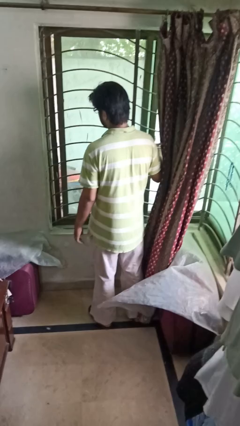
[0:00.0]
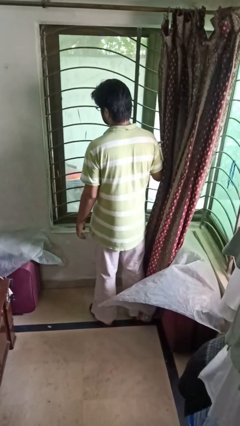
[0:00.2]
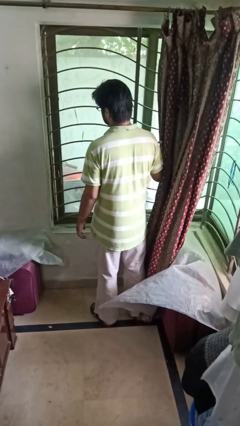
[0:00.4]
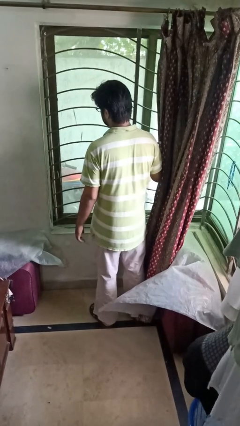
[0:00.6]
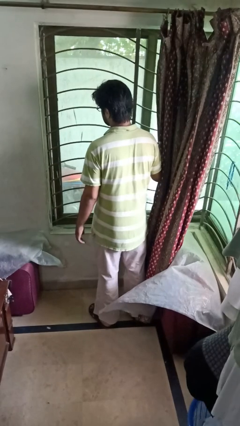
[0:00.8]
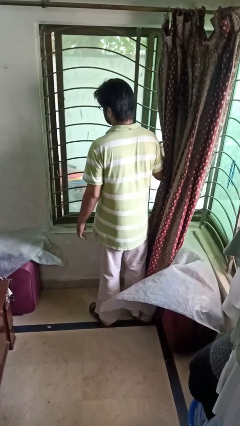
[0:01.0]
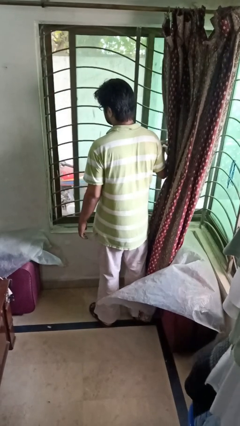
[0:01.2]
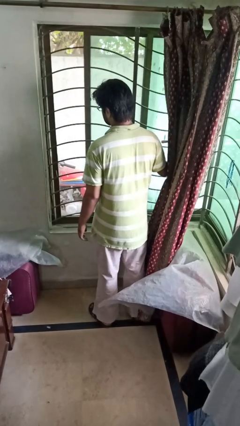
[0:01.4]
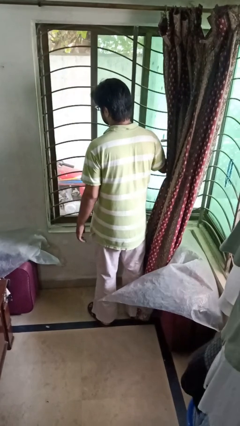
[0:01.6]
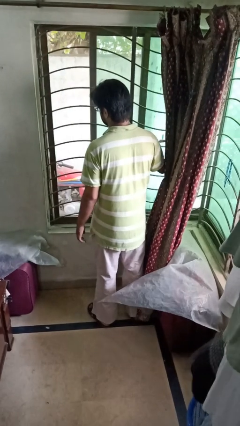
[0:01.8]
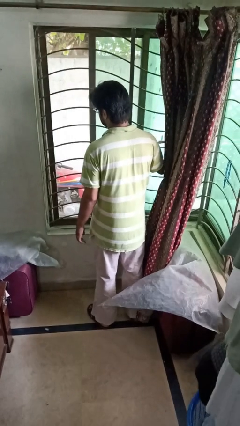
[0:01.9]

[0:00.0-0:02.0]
person opens home window

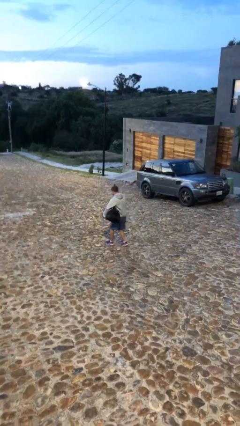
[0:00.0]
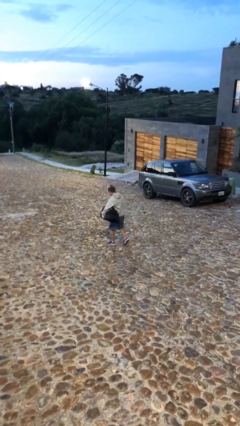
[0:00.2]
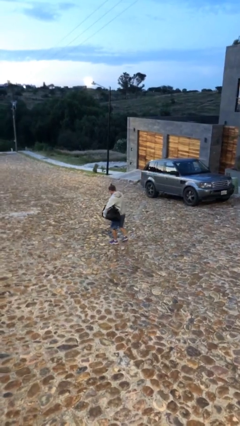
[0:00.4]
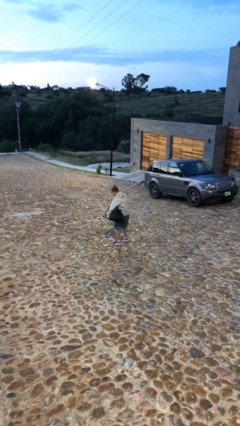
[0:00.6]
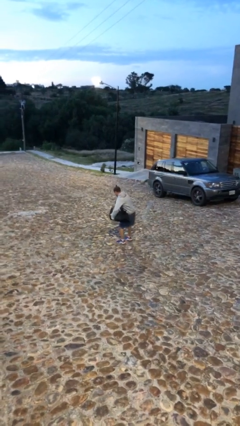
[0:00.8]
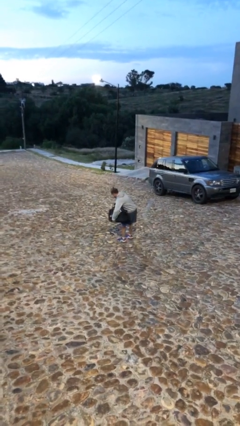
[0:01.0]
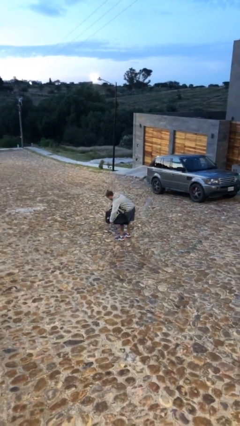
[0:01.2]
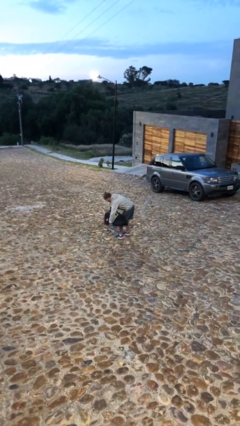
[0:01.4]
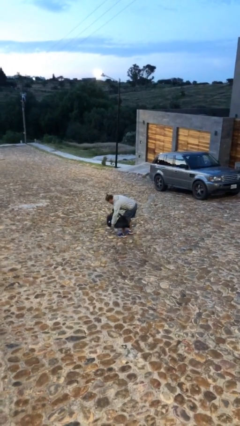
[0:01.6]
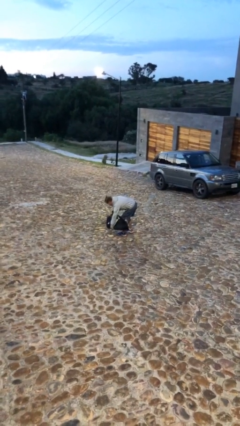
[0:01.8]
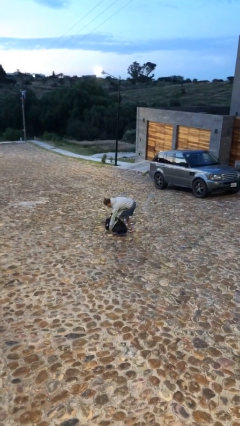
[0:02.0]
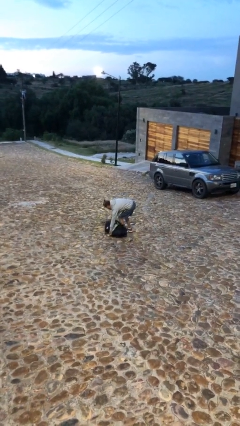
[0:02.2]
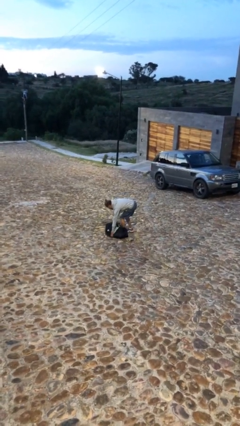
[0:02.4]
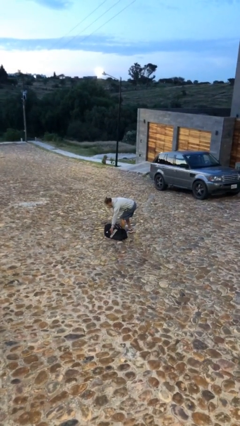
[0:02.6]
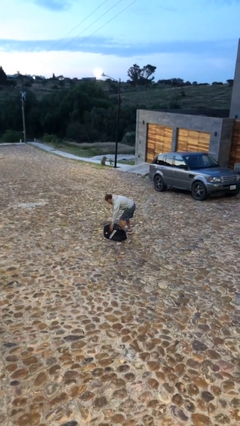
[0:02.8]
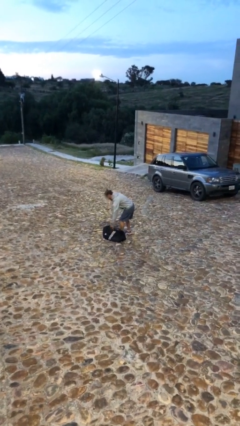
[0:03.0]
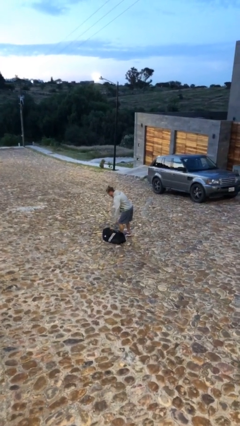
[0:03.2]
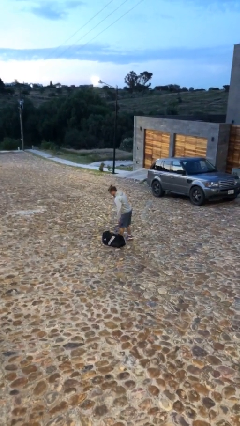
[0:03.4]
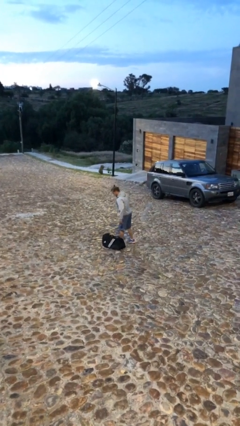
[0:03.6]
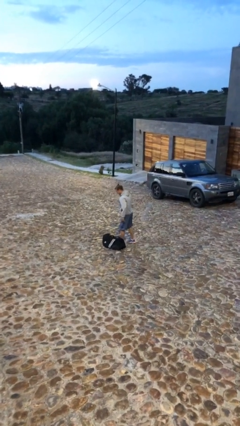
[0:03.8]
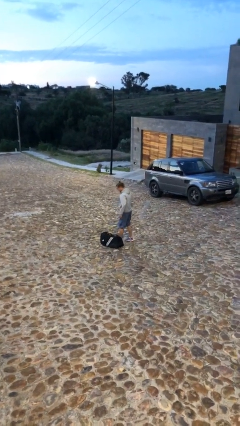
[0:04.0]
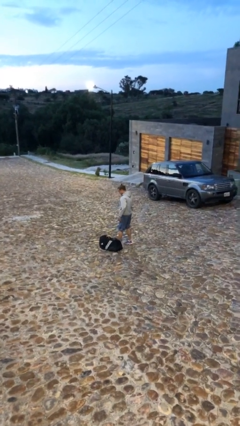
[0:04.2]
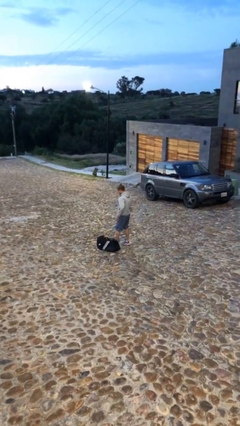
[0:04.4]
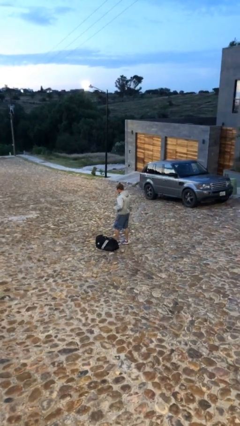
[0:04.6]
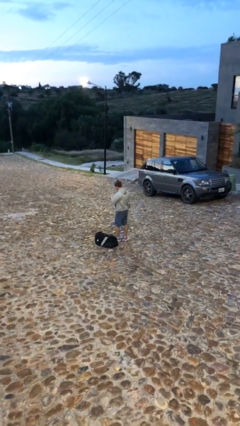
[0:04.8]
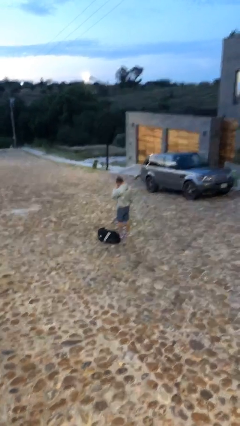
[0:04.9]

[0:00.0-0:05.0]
person puts down object on floor

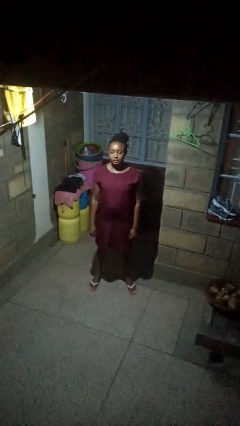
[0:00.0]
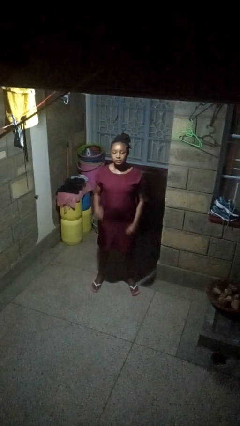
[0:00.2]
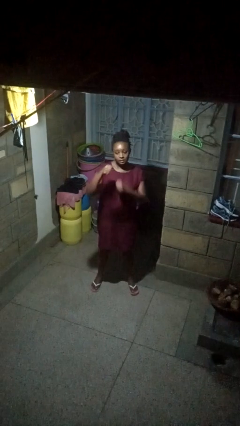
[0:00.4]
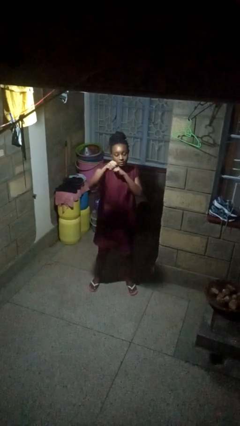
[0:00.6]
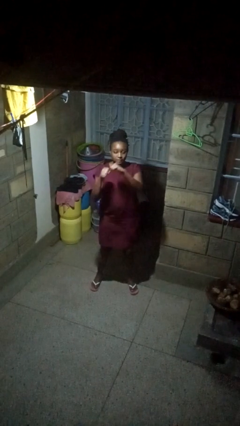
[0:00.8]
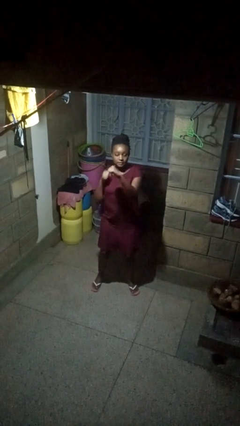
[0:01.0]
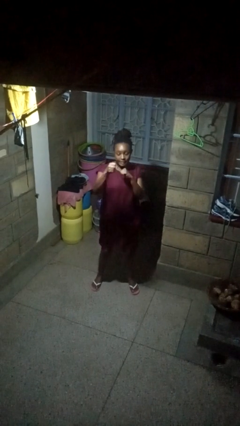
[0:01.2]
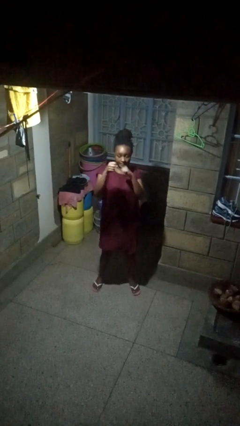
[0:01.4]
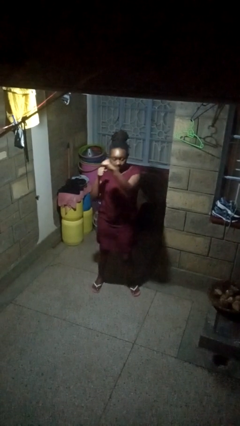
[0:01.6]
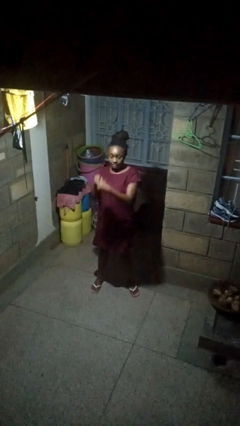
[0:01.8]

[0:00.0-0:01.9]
person punches

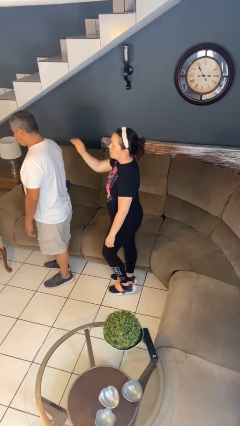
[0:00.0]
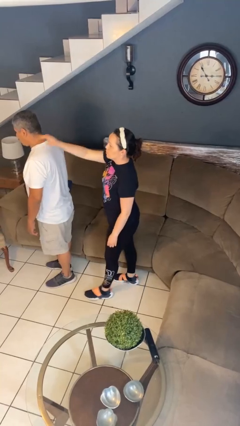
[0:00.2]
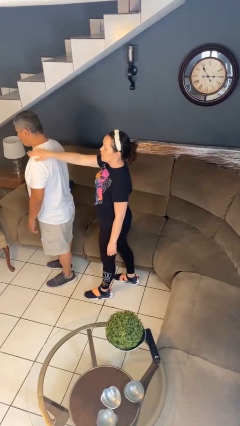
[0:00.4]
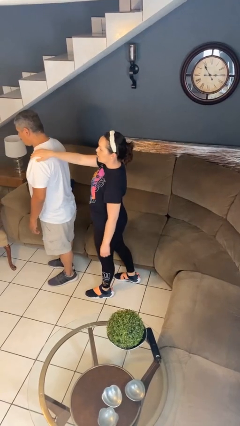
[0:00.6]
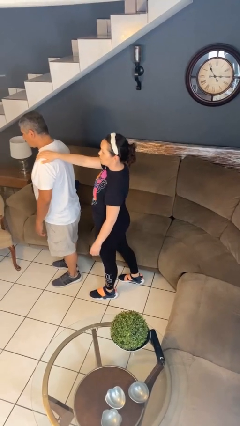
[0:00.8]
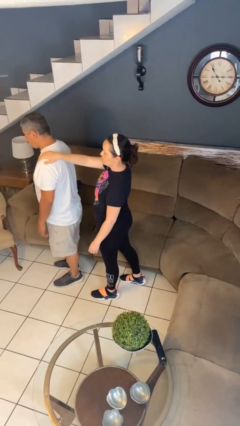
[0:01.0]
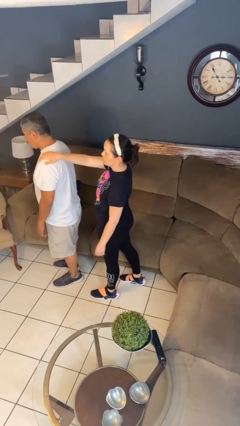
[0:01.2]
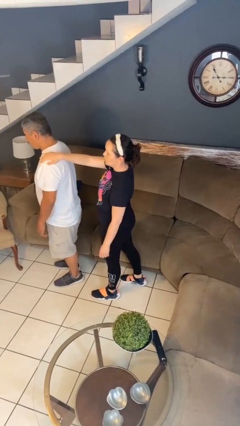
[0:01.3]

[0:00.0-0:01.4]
person grabs person by shoulder

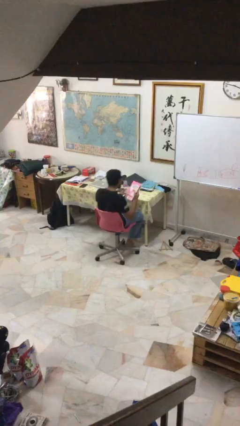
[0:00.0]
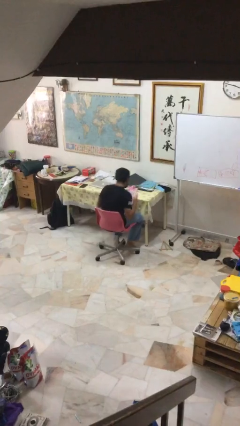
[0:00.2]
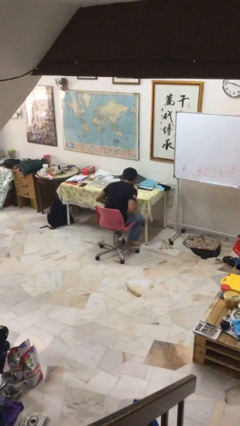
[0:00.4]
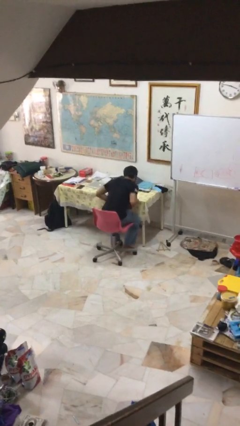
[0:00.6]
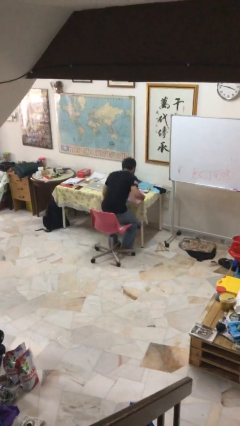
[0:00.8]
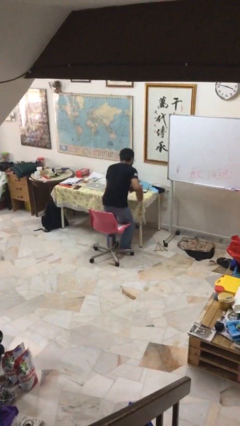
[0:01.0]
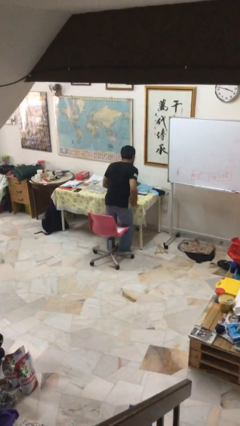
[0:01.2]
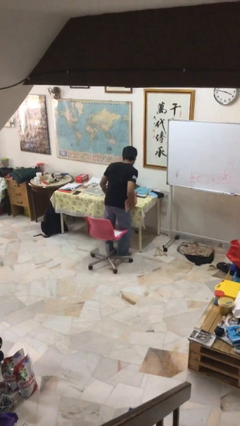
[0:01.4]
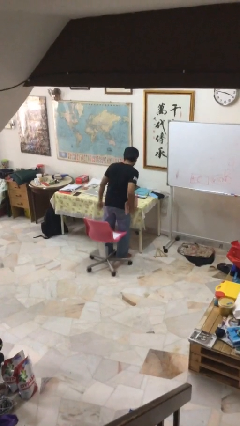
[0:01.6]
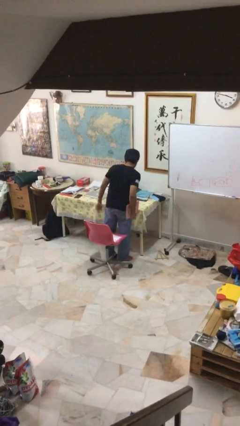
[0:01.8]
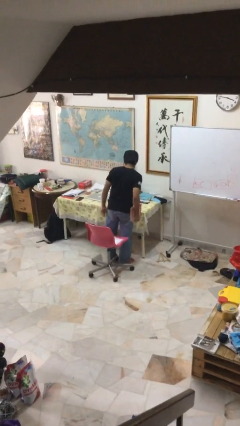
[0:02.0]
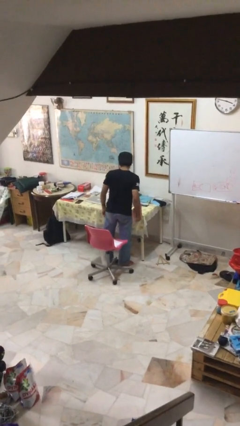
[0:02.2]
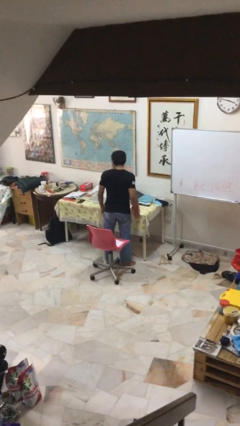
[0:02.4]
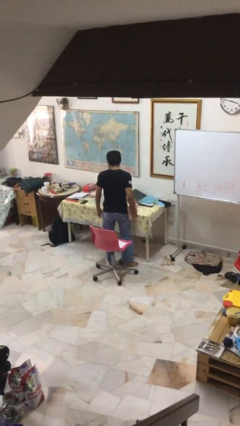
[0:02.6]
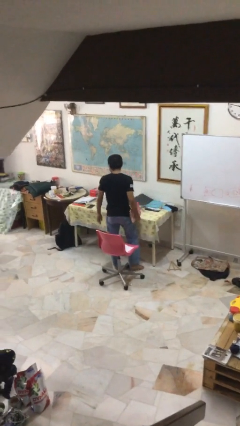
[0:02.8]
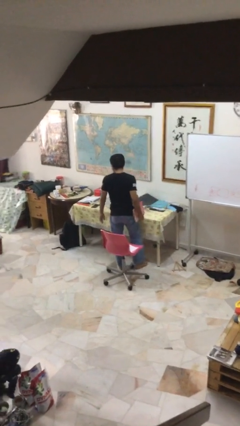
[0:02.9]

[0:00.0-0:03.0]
person stands up

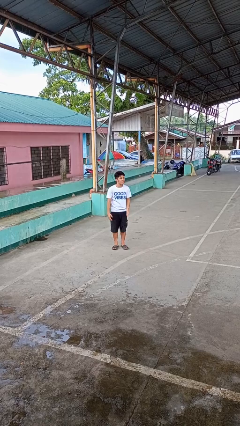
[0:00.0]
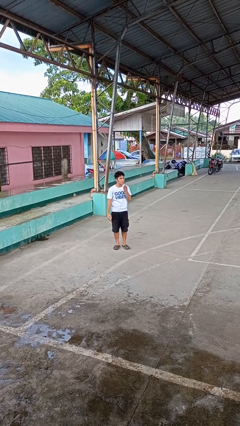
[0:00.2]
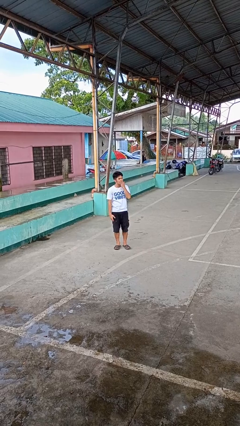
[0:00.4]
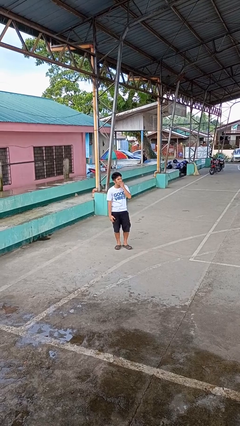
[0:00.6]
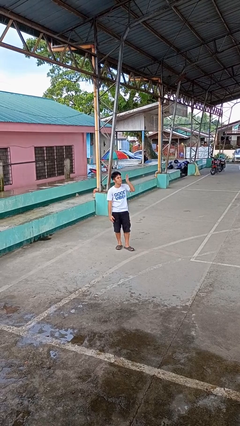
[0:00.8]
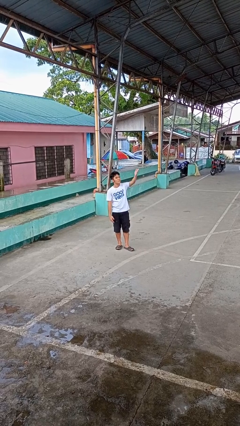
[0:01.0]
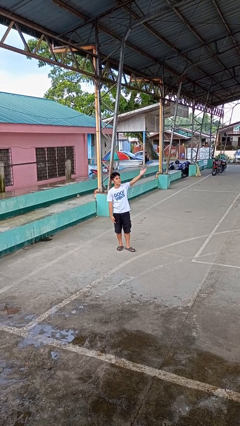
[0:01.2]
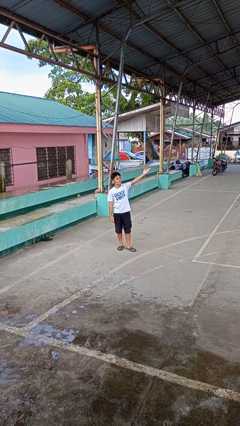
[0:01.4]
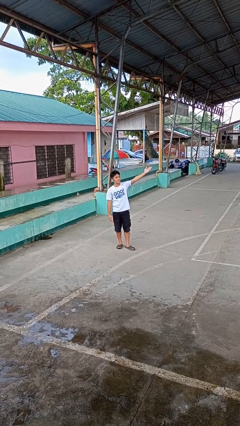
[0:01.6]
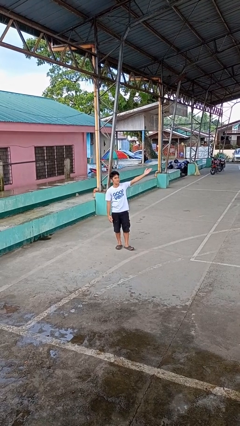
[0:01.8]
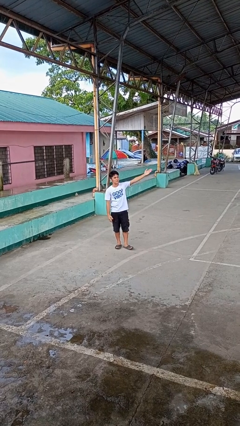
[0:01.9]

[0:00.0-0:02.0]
person gestures blow kiss

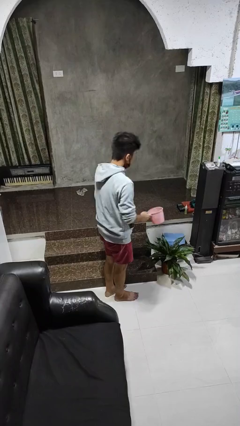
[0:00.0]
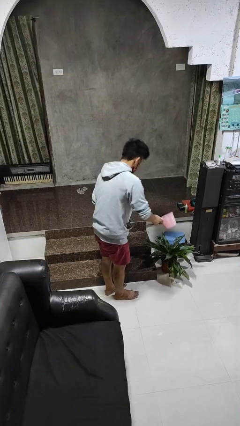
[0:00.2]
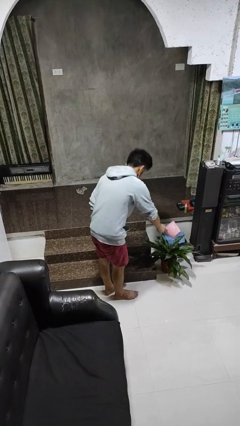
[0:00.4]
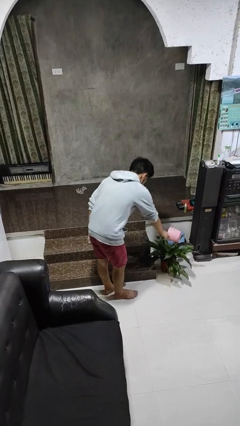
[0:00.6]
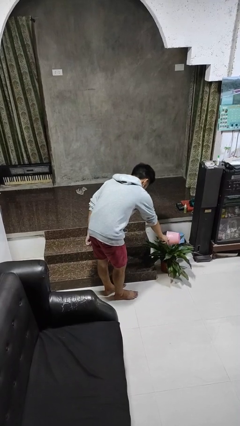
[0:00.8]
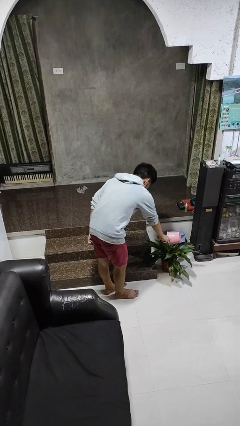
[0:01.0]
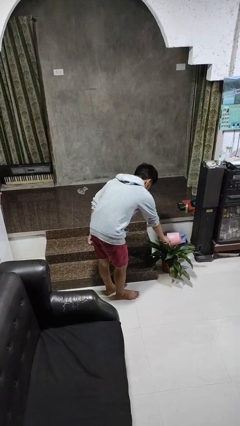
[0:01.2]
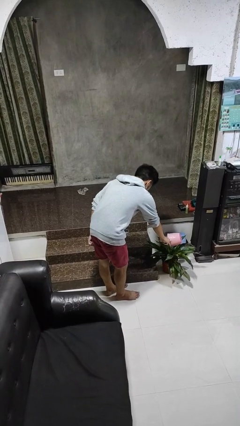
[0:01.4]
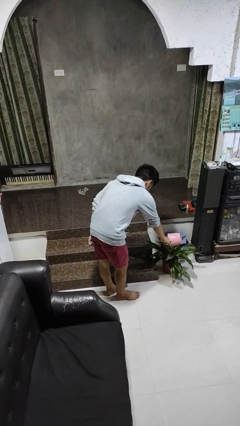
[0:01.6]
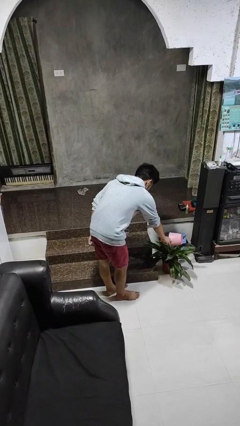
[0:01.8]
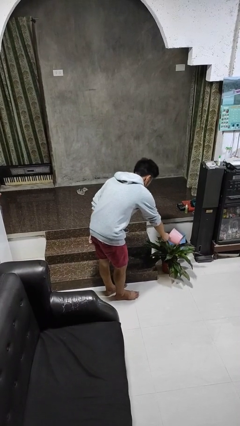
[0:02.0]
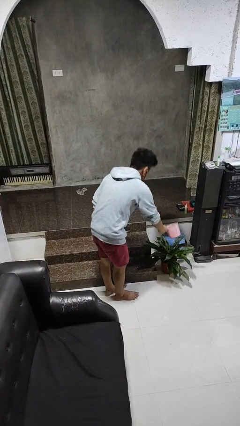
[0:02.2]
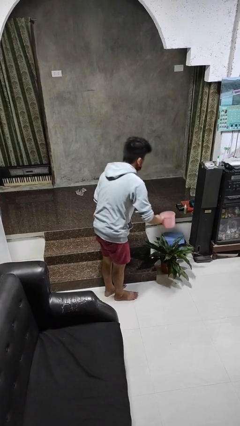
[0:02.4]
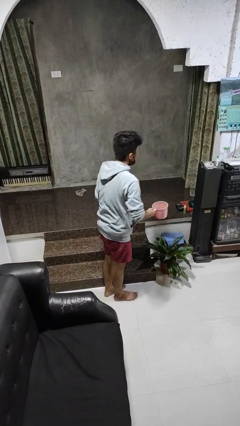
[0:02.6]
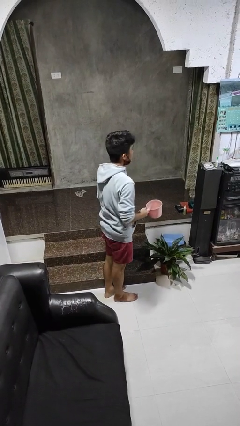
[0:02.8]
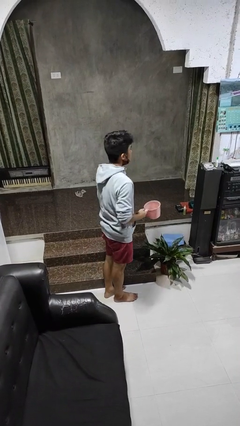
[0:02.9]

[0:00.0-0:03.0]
person waters houseplant
